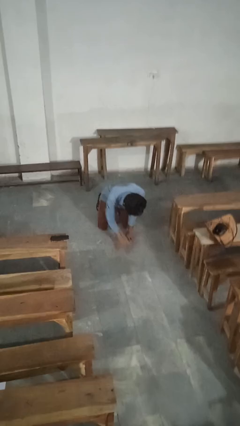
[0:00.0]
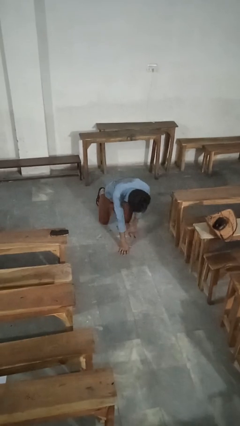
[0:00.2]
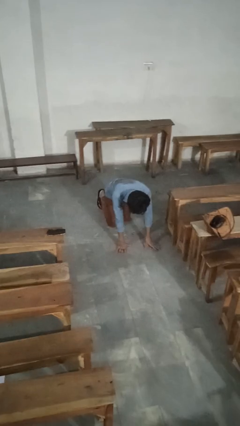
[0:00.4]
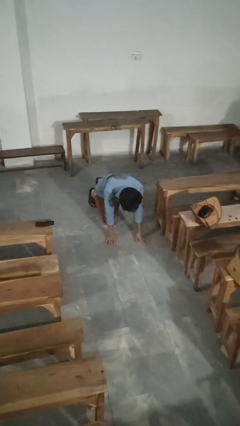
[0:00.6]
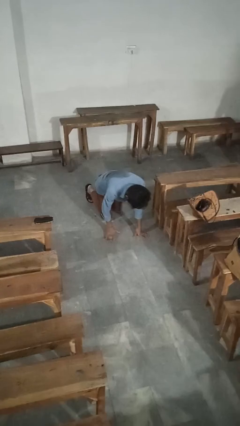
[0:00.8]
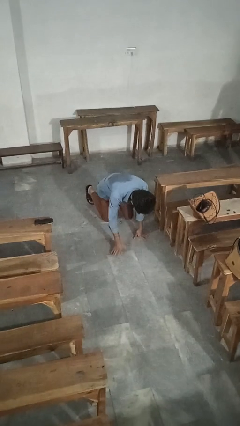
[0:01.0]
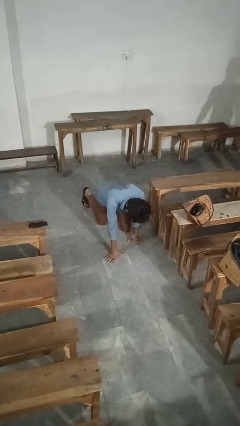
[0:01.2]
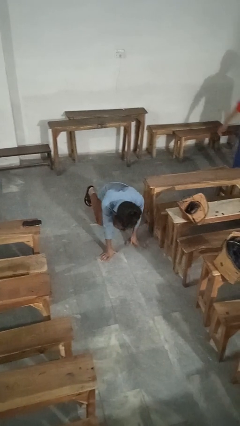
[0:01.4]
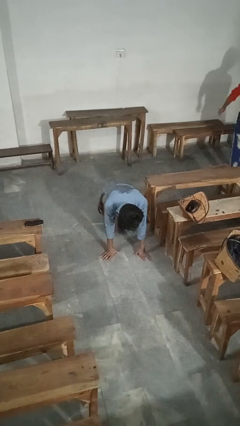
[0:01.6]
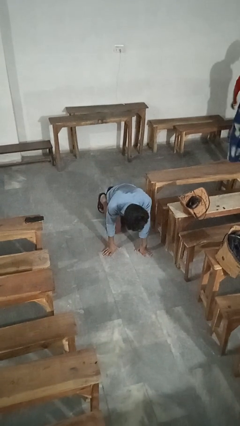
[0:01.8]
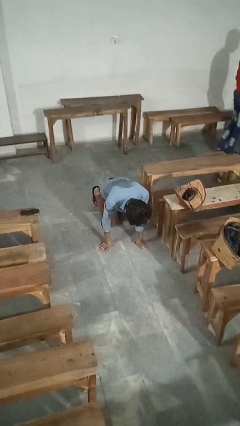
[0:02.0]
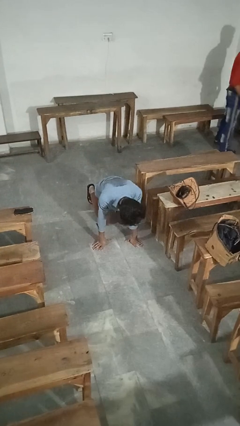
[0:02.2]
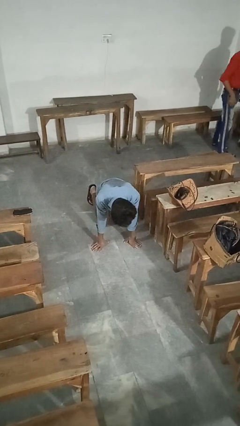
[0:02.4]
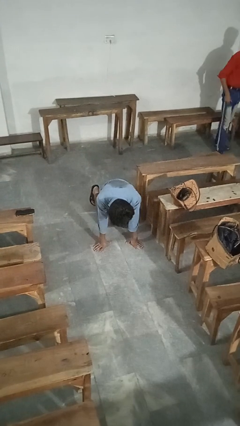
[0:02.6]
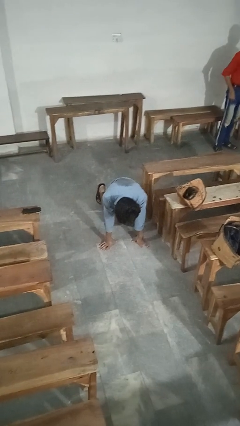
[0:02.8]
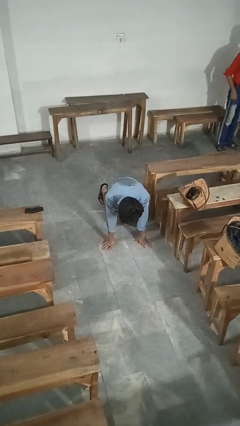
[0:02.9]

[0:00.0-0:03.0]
person crawls

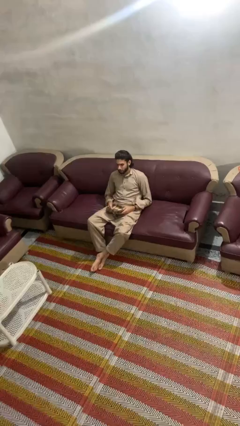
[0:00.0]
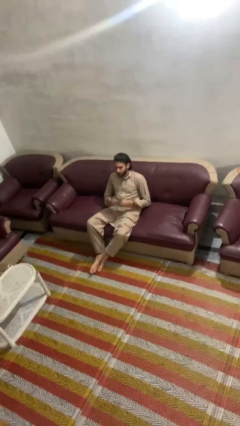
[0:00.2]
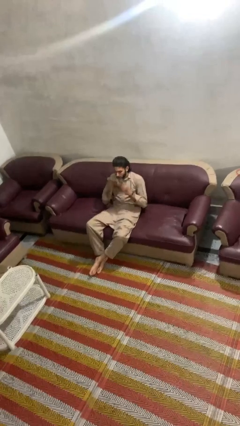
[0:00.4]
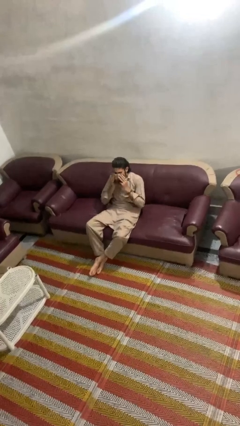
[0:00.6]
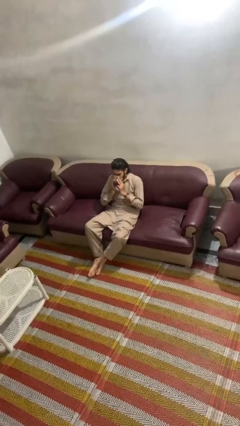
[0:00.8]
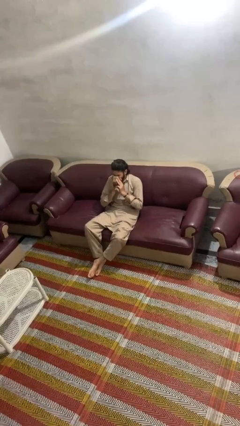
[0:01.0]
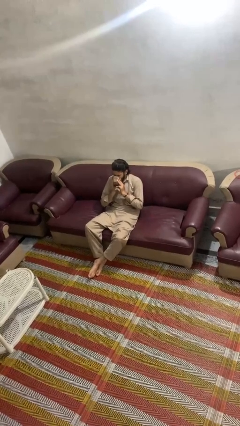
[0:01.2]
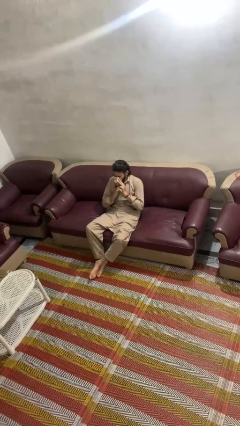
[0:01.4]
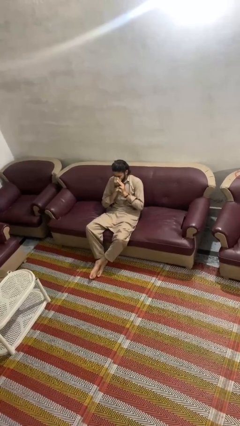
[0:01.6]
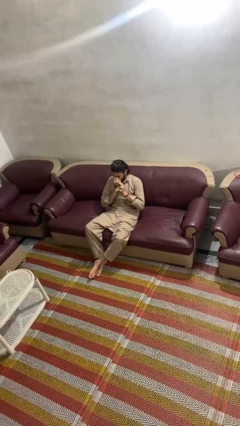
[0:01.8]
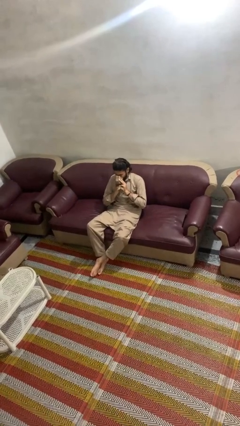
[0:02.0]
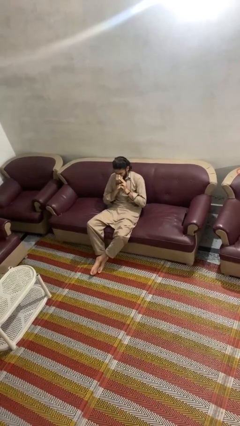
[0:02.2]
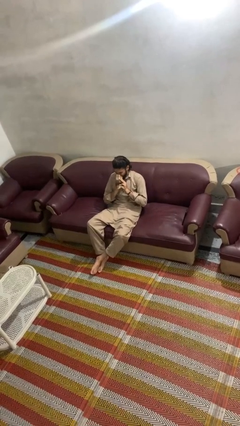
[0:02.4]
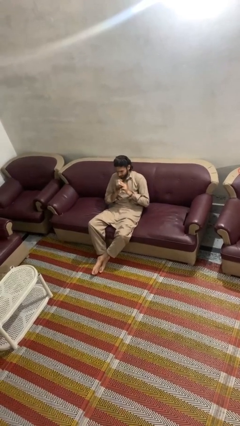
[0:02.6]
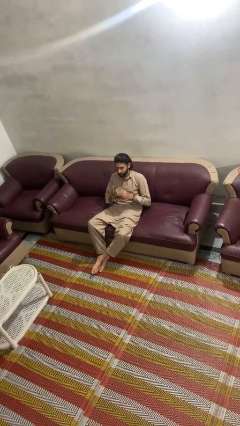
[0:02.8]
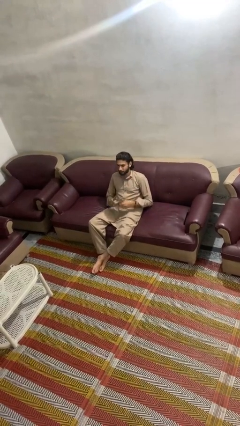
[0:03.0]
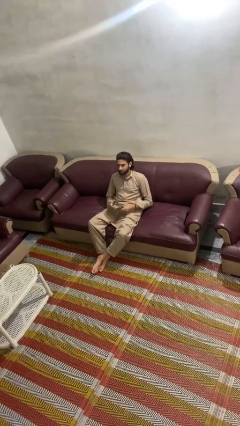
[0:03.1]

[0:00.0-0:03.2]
person blows nose

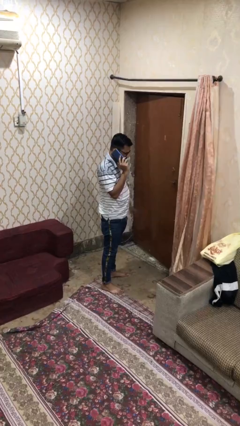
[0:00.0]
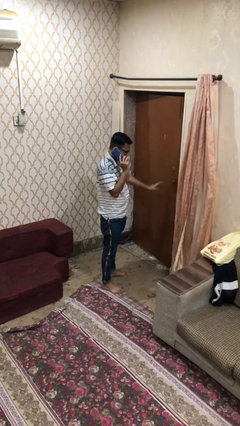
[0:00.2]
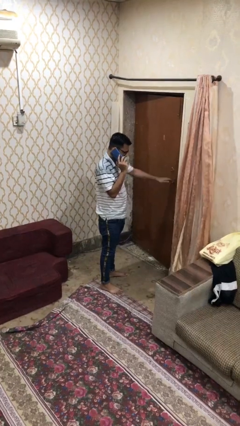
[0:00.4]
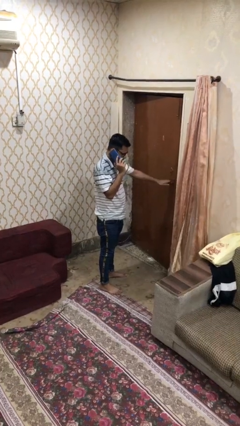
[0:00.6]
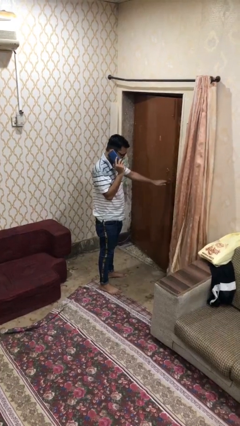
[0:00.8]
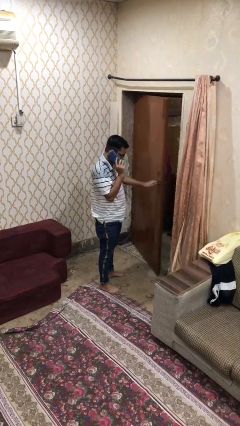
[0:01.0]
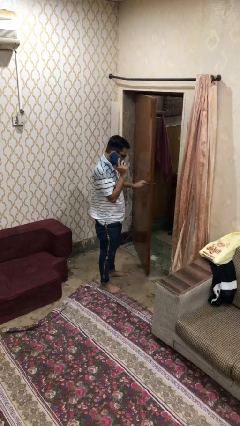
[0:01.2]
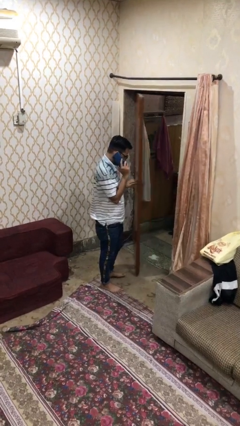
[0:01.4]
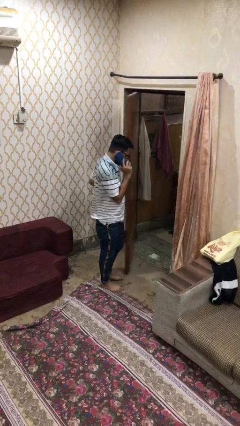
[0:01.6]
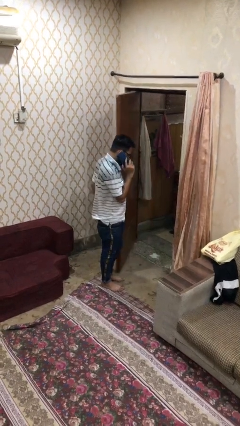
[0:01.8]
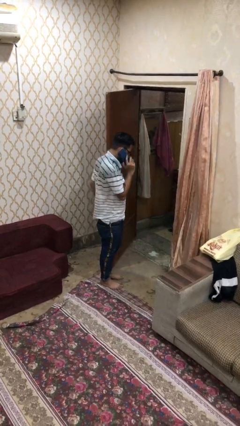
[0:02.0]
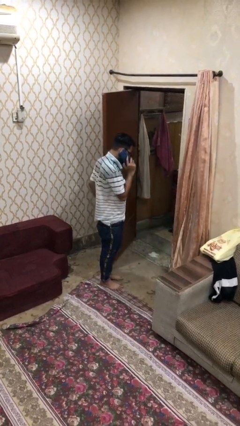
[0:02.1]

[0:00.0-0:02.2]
person opens facility door

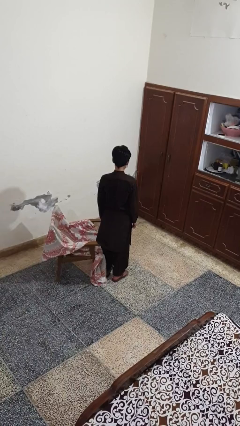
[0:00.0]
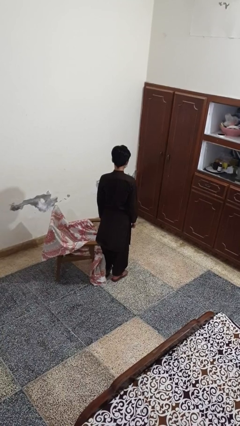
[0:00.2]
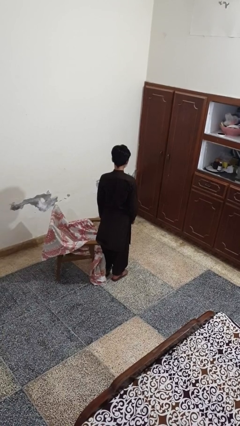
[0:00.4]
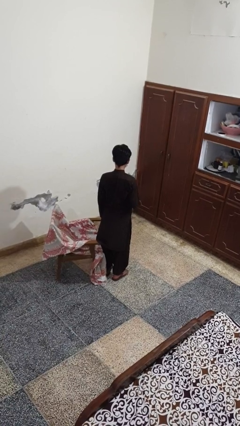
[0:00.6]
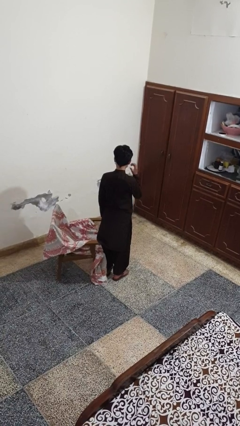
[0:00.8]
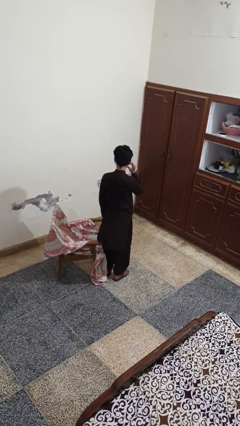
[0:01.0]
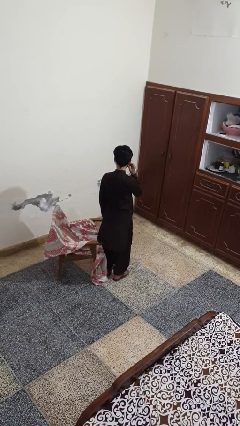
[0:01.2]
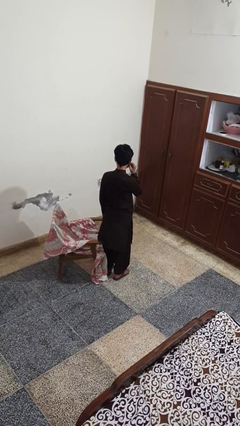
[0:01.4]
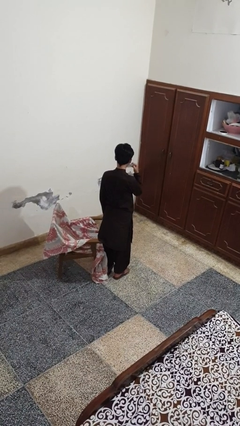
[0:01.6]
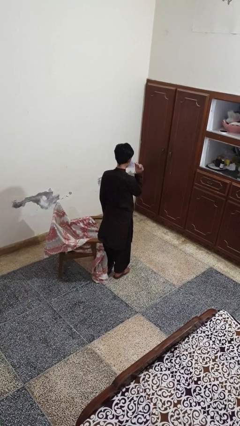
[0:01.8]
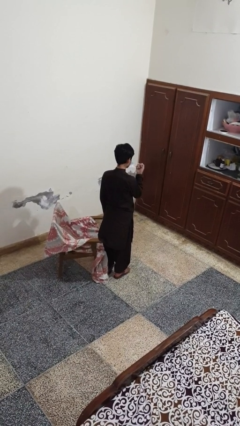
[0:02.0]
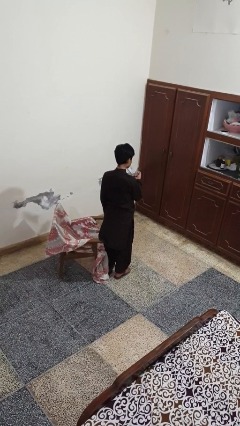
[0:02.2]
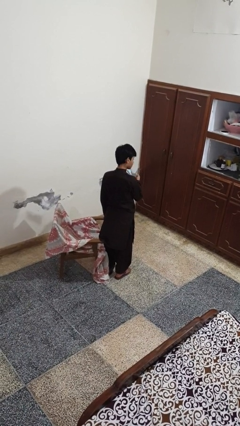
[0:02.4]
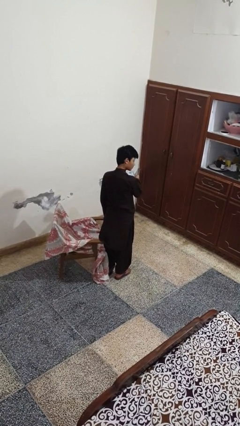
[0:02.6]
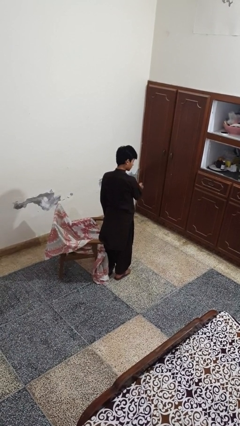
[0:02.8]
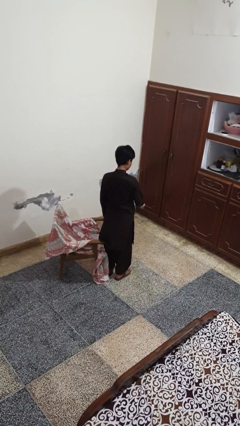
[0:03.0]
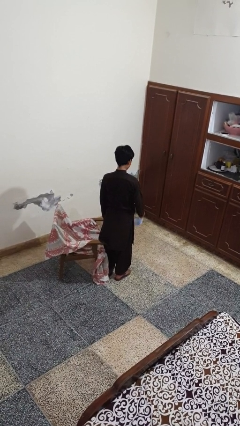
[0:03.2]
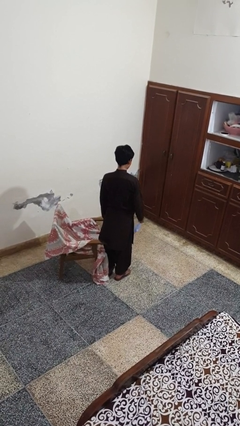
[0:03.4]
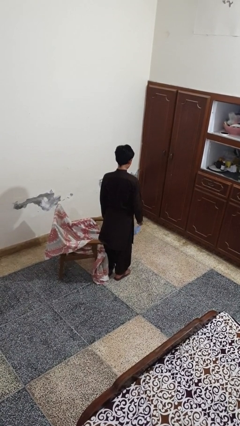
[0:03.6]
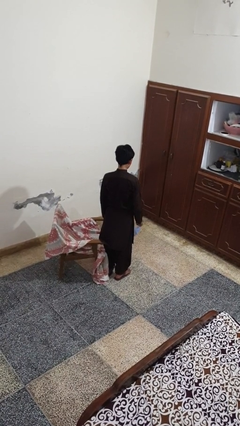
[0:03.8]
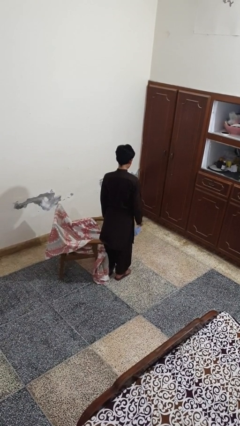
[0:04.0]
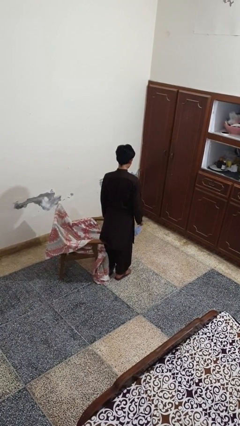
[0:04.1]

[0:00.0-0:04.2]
person takes off facemask

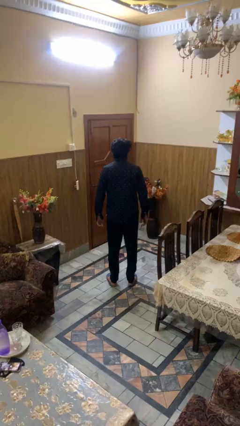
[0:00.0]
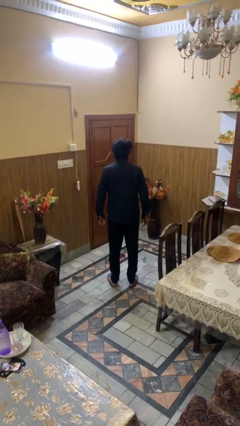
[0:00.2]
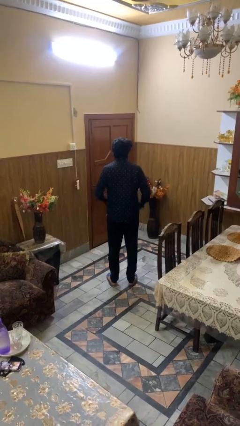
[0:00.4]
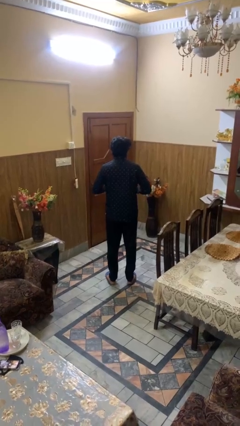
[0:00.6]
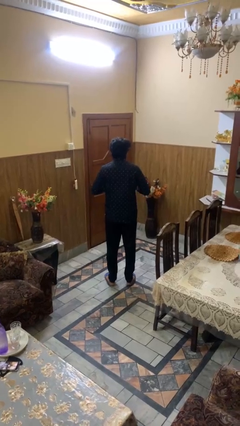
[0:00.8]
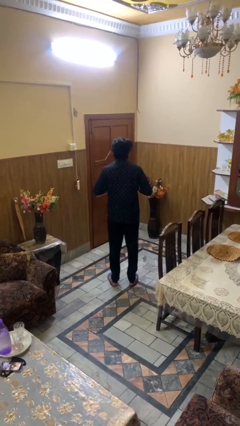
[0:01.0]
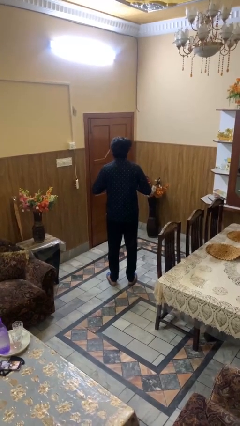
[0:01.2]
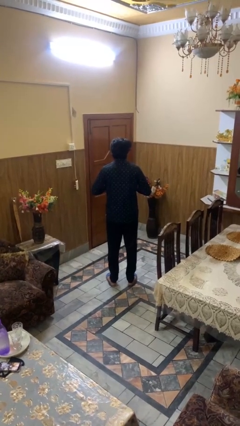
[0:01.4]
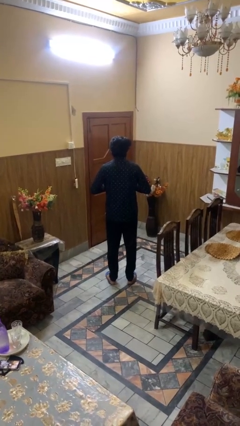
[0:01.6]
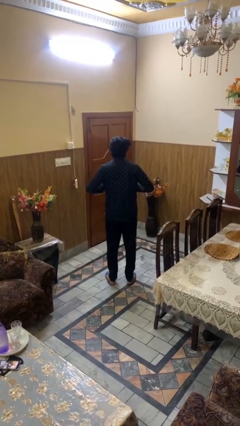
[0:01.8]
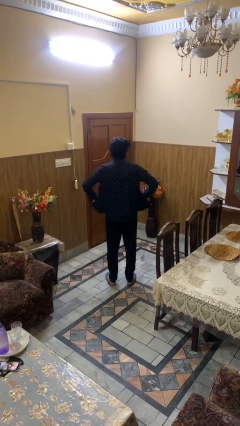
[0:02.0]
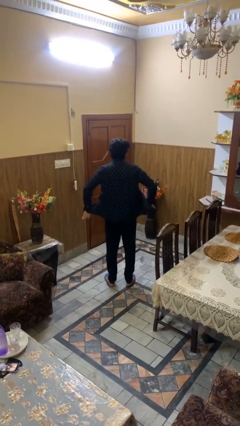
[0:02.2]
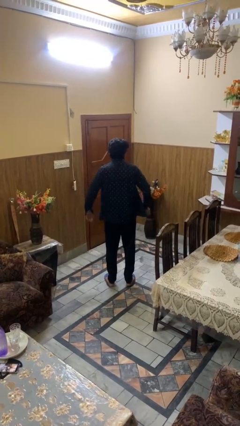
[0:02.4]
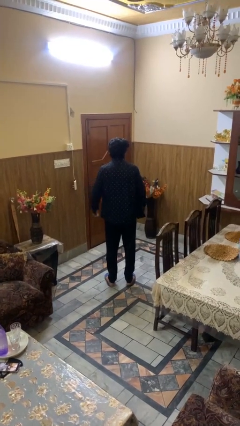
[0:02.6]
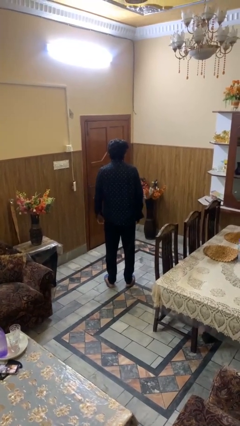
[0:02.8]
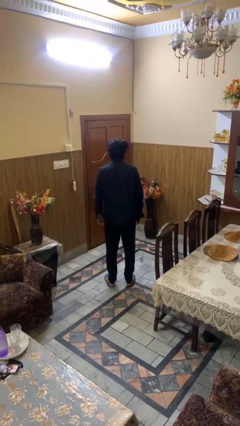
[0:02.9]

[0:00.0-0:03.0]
person unbuttons shirt

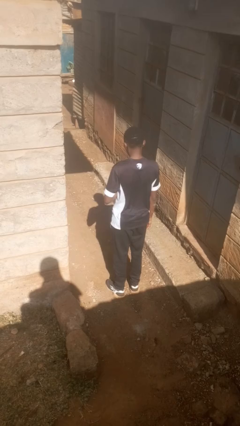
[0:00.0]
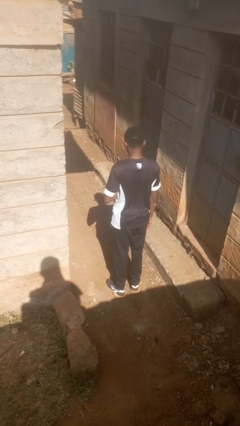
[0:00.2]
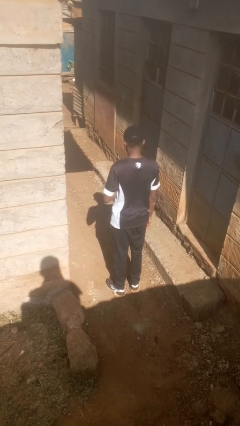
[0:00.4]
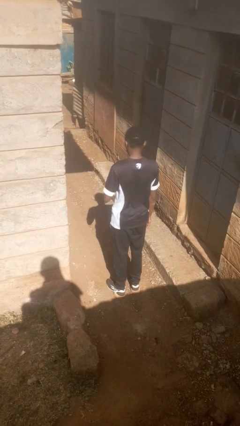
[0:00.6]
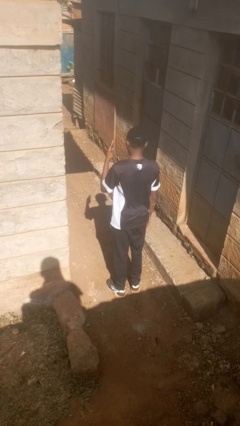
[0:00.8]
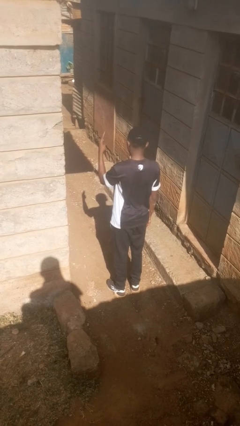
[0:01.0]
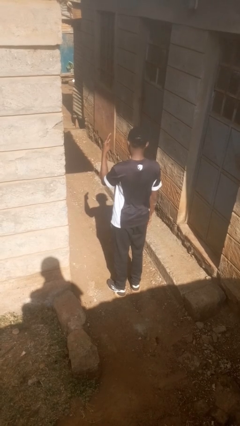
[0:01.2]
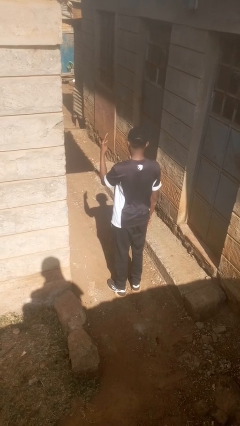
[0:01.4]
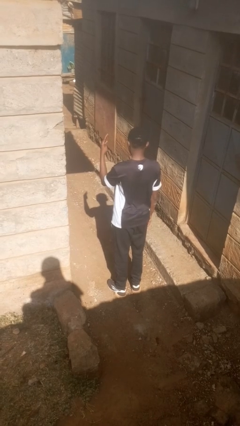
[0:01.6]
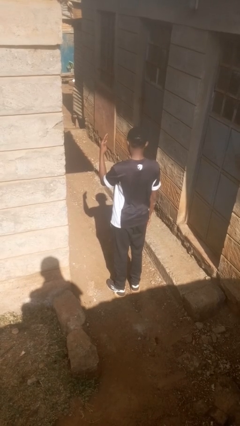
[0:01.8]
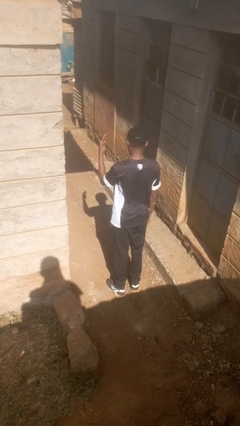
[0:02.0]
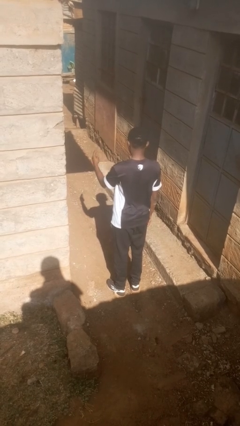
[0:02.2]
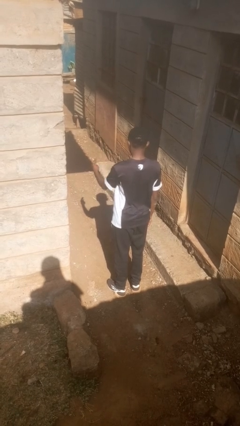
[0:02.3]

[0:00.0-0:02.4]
person gestures number four
